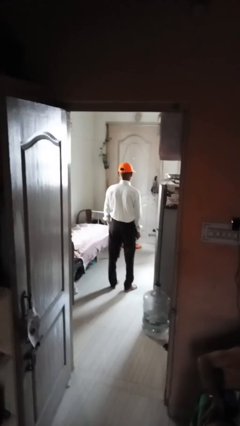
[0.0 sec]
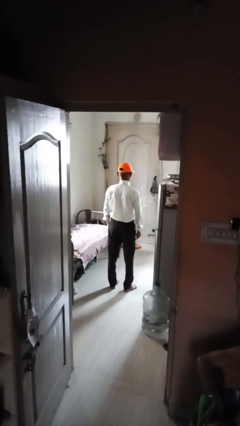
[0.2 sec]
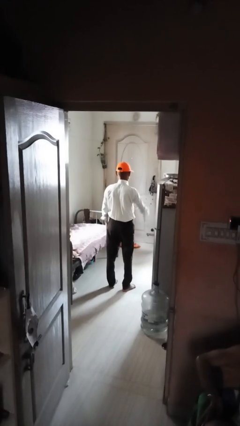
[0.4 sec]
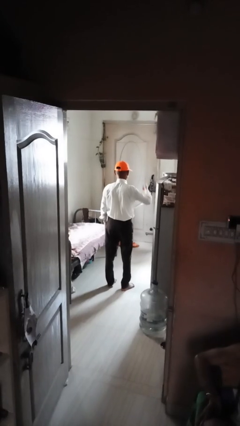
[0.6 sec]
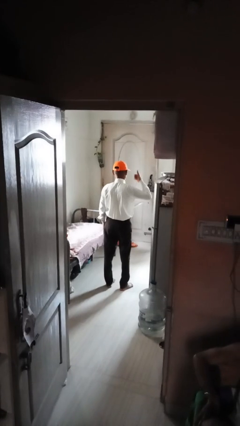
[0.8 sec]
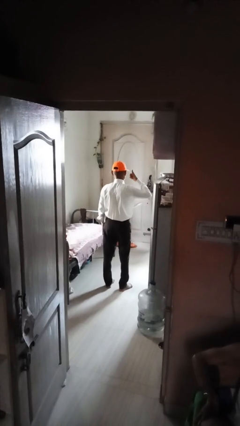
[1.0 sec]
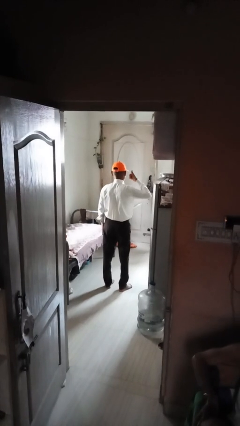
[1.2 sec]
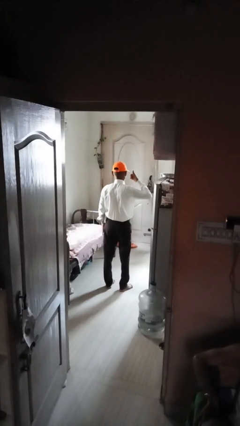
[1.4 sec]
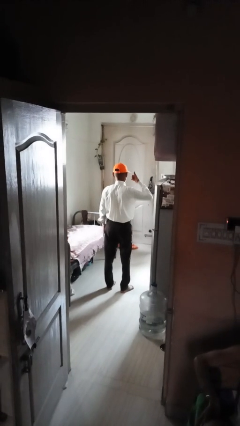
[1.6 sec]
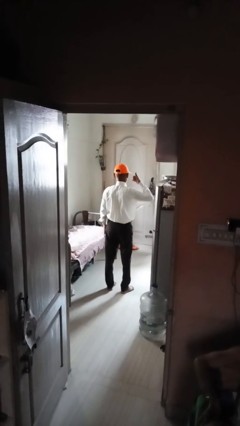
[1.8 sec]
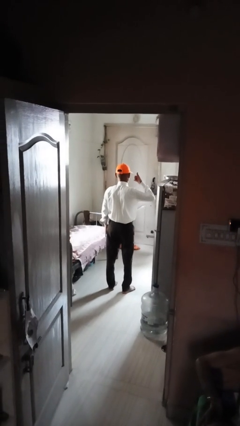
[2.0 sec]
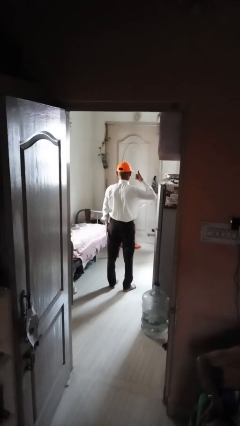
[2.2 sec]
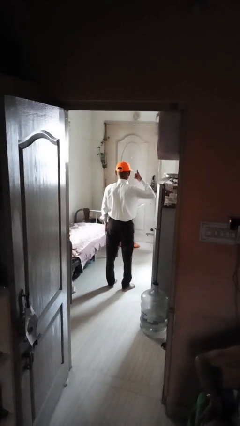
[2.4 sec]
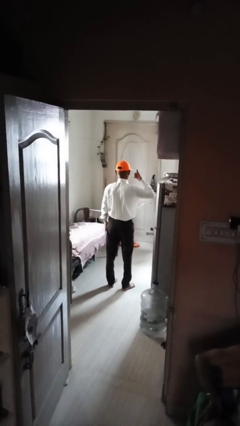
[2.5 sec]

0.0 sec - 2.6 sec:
person gestures call me

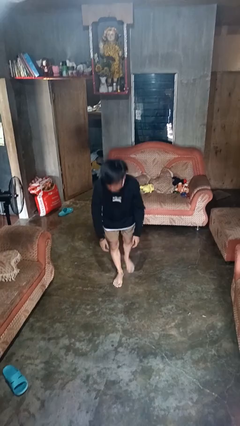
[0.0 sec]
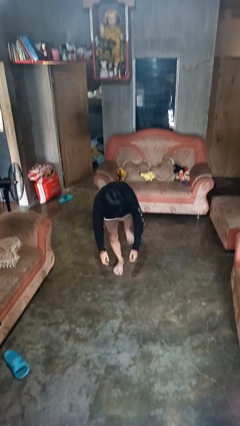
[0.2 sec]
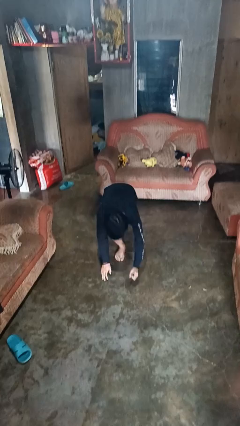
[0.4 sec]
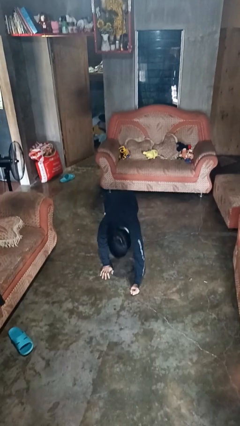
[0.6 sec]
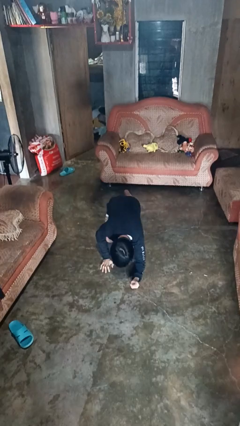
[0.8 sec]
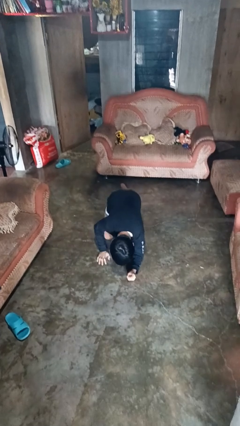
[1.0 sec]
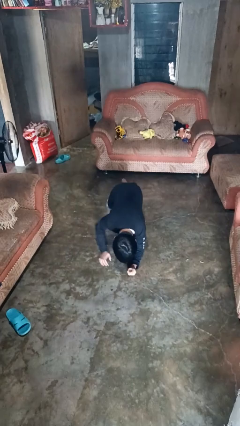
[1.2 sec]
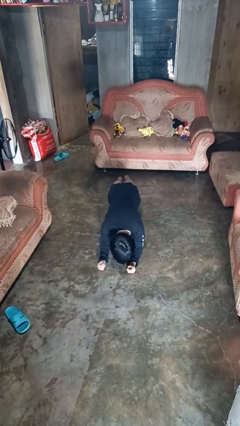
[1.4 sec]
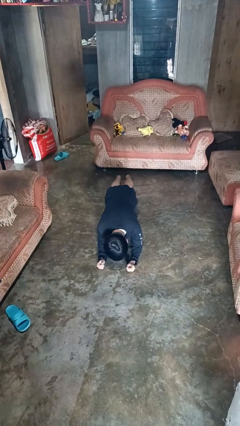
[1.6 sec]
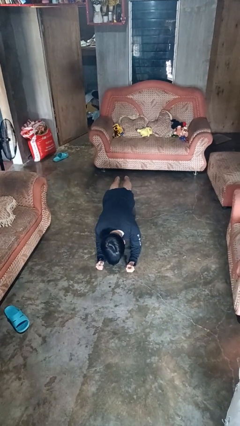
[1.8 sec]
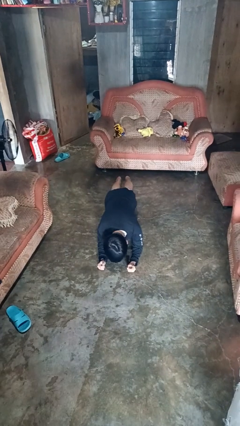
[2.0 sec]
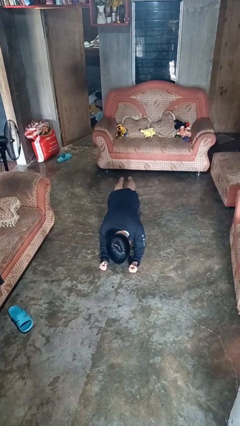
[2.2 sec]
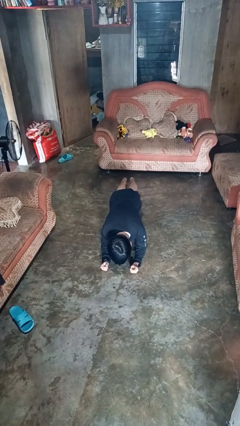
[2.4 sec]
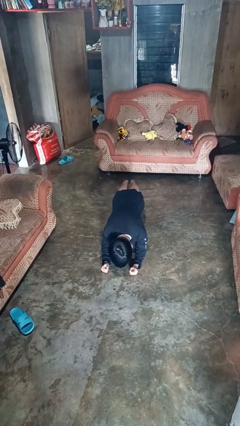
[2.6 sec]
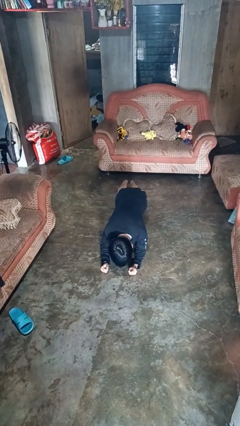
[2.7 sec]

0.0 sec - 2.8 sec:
person exercises with plank

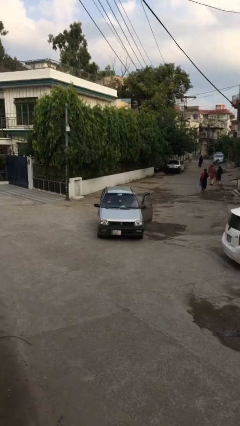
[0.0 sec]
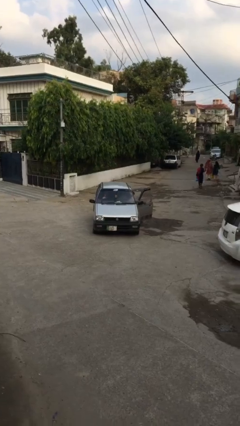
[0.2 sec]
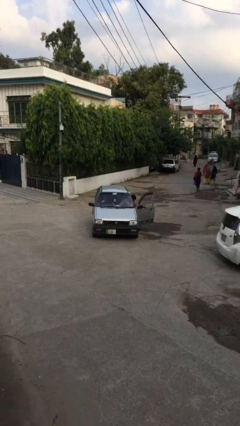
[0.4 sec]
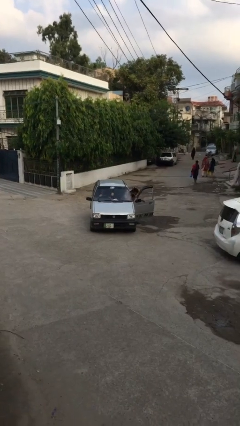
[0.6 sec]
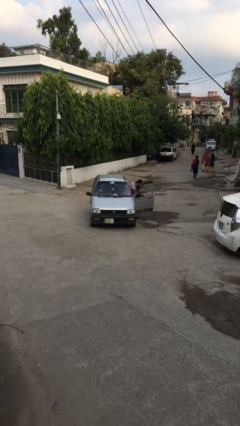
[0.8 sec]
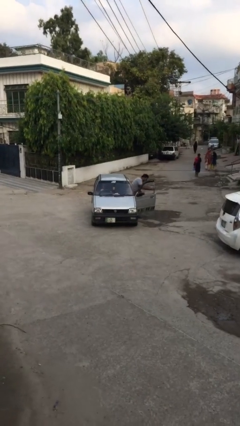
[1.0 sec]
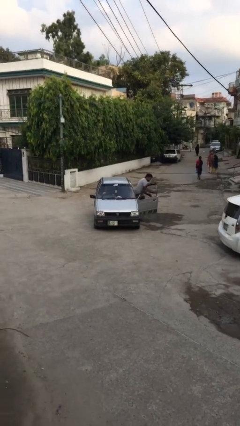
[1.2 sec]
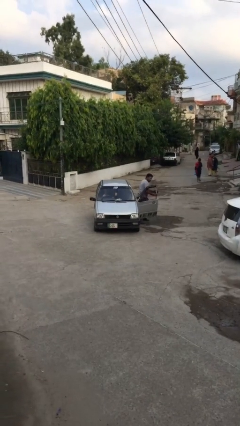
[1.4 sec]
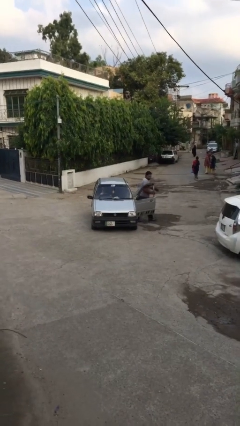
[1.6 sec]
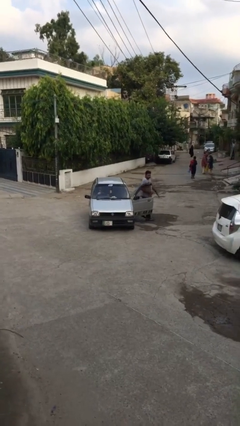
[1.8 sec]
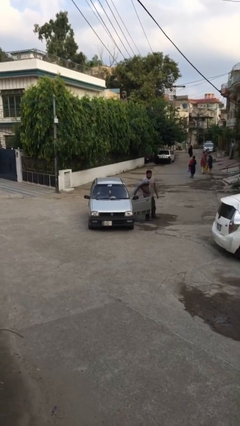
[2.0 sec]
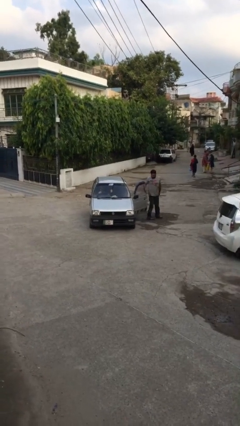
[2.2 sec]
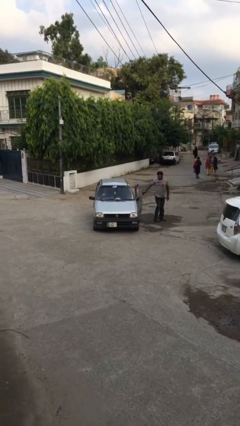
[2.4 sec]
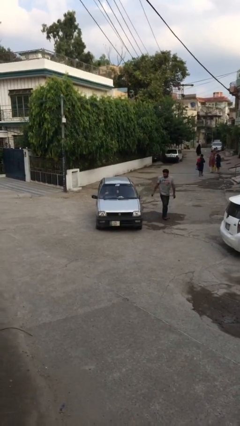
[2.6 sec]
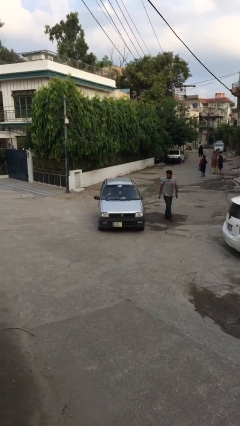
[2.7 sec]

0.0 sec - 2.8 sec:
car drops off person

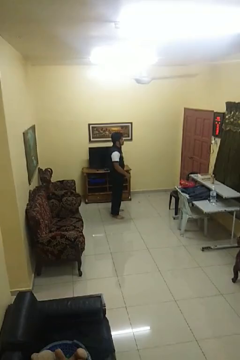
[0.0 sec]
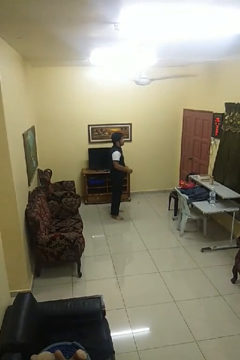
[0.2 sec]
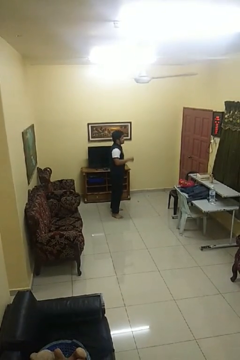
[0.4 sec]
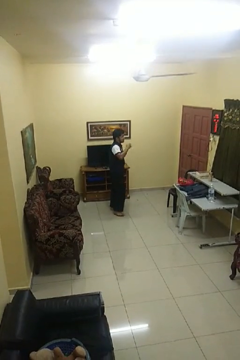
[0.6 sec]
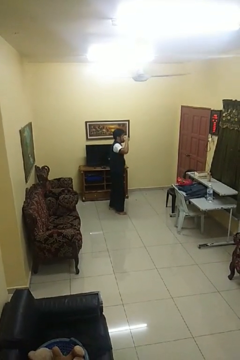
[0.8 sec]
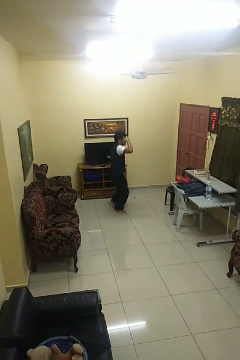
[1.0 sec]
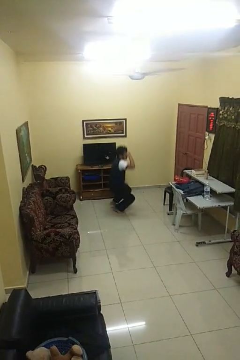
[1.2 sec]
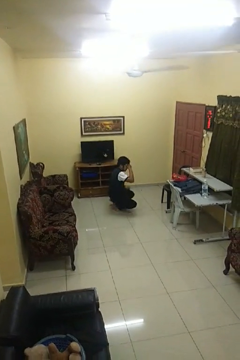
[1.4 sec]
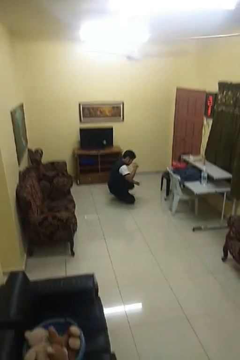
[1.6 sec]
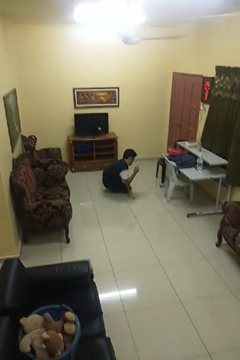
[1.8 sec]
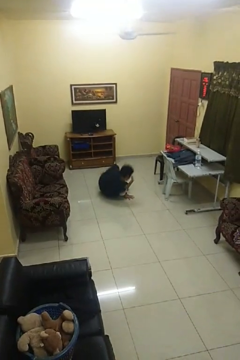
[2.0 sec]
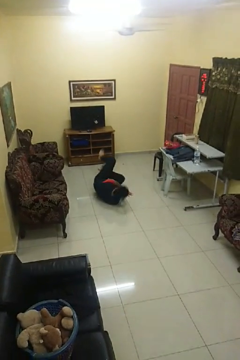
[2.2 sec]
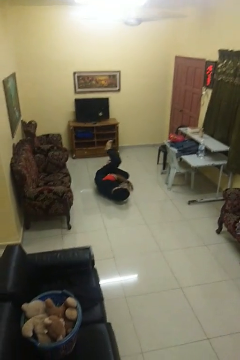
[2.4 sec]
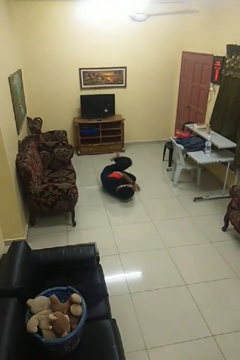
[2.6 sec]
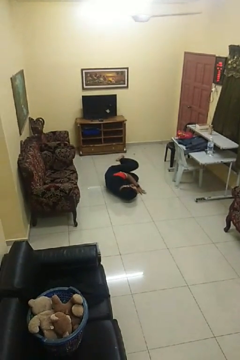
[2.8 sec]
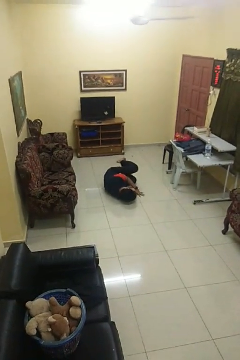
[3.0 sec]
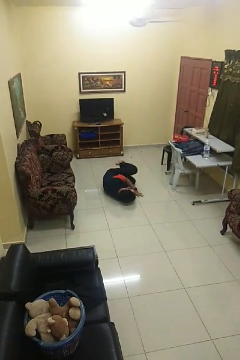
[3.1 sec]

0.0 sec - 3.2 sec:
person falls while standing

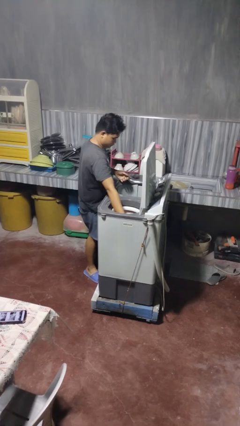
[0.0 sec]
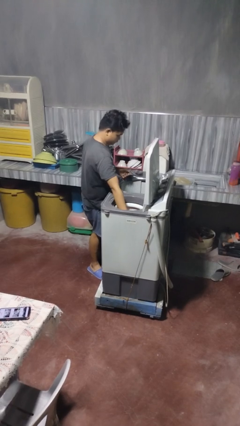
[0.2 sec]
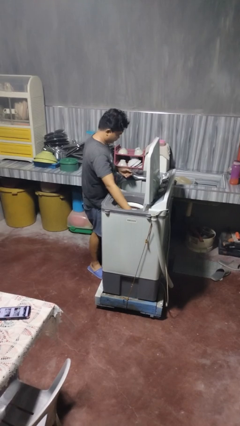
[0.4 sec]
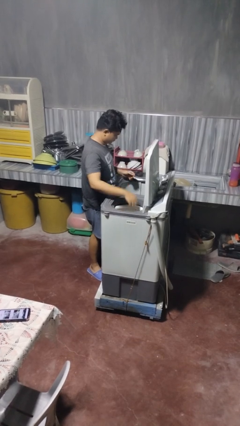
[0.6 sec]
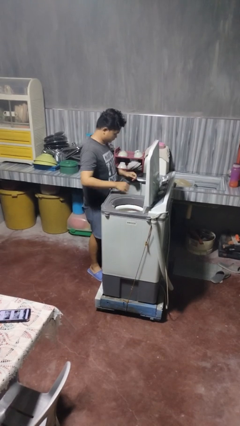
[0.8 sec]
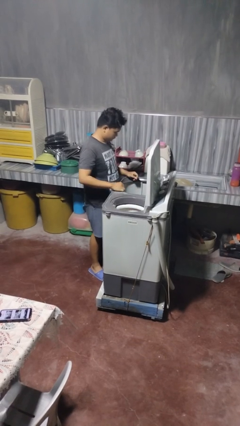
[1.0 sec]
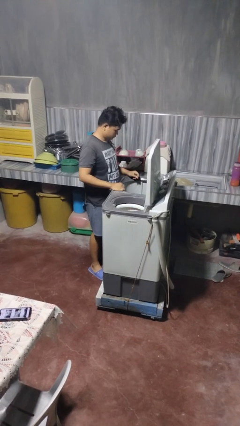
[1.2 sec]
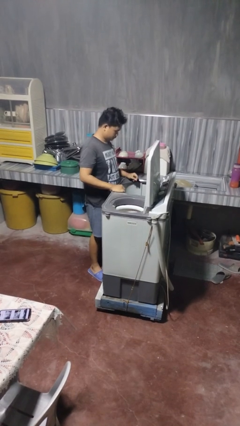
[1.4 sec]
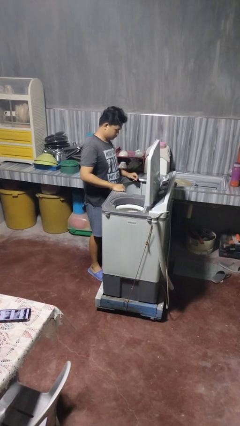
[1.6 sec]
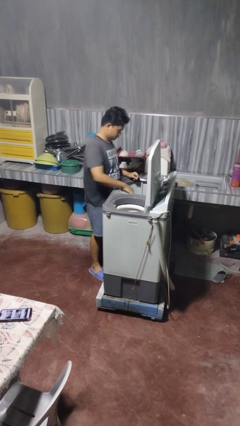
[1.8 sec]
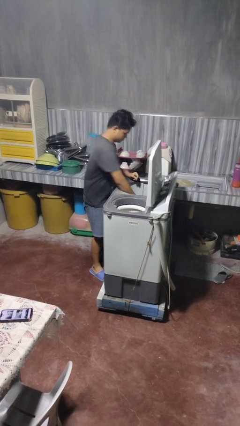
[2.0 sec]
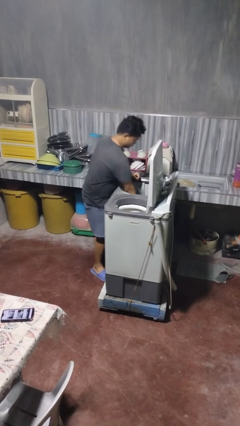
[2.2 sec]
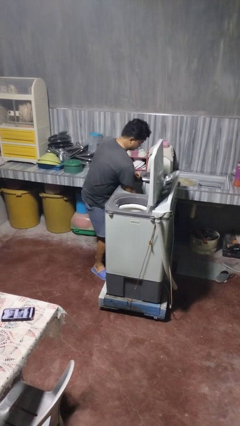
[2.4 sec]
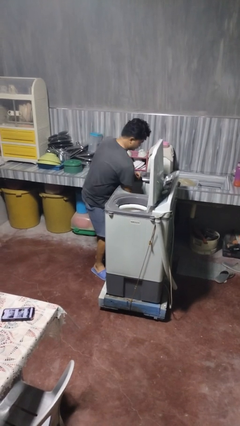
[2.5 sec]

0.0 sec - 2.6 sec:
person loads dryer

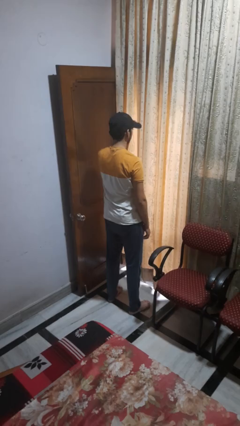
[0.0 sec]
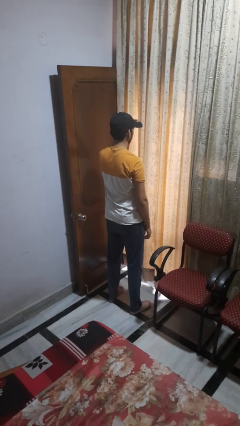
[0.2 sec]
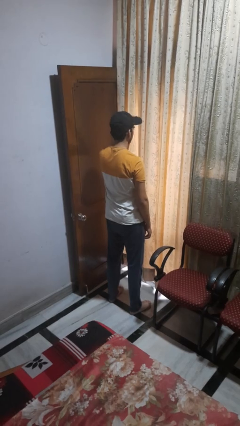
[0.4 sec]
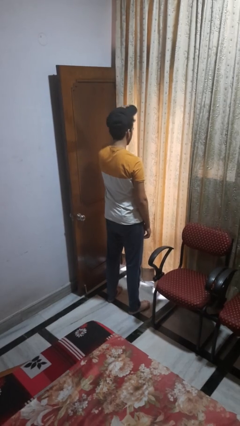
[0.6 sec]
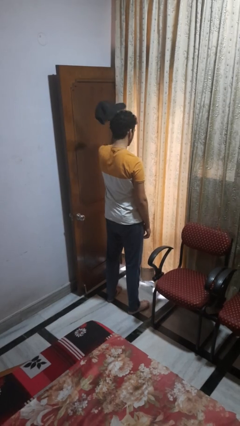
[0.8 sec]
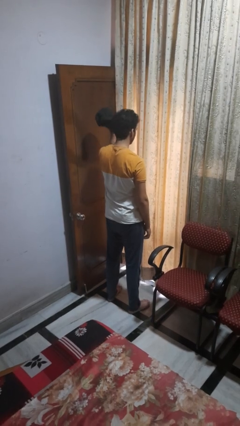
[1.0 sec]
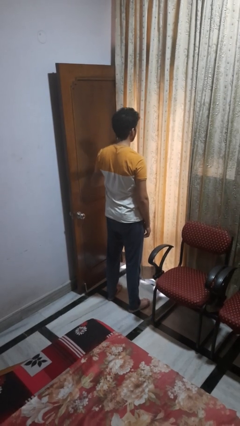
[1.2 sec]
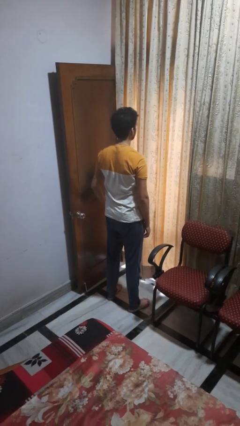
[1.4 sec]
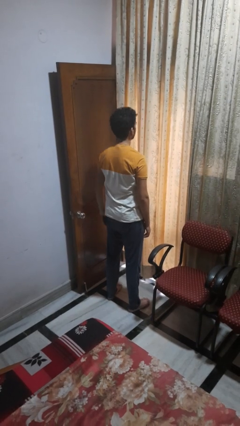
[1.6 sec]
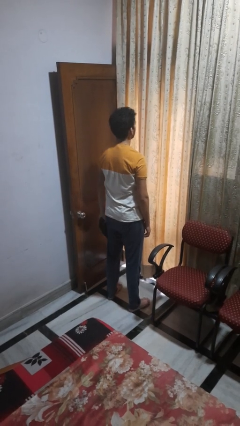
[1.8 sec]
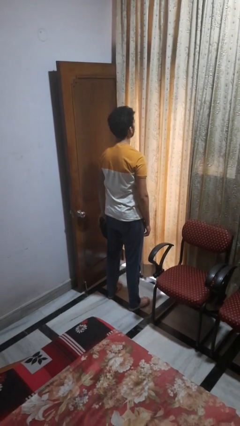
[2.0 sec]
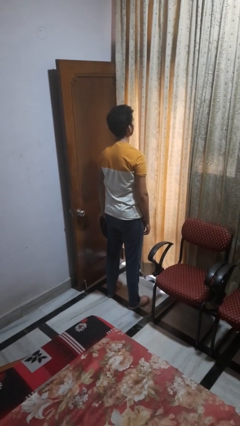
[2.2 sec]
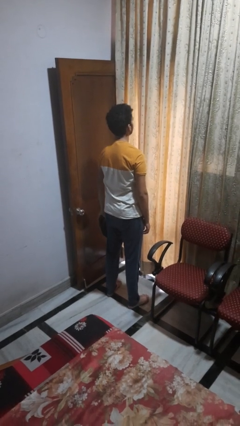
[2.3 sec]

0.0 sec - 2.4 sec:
person takes off hat

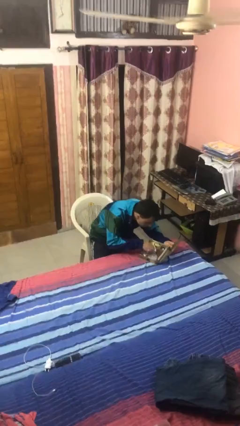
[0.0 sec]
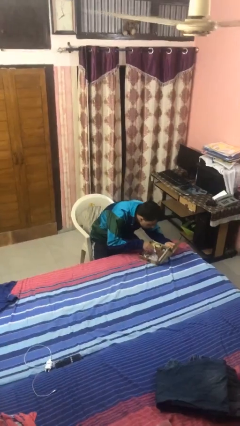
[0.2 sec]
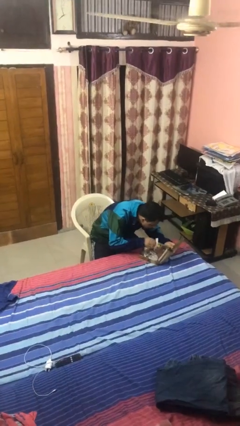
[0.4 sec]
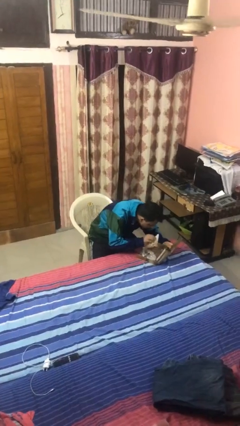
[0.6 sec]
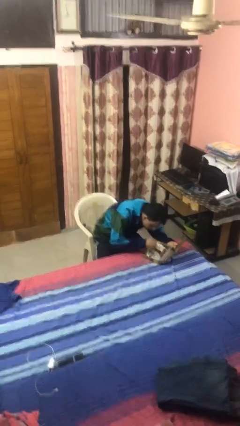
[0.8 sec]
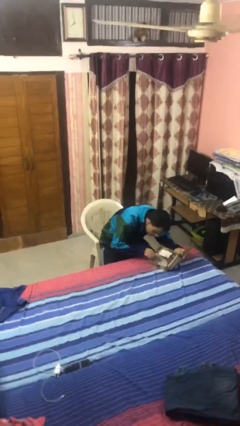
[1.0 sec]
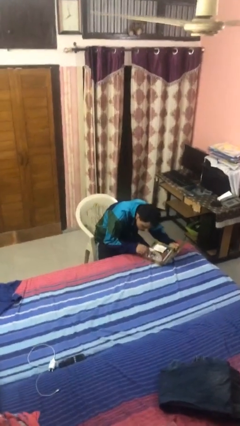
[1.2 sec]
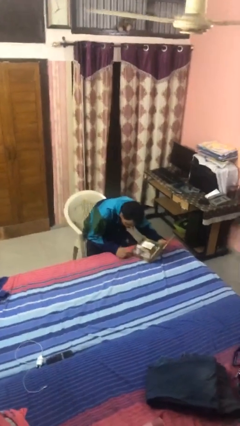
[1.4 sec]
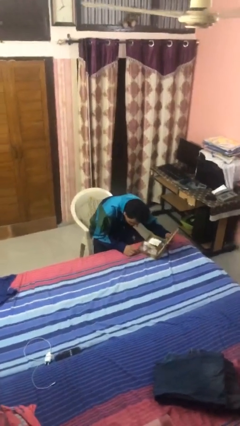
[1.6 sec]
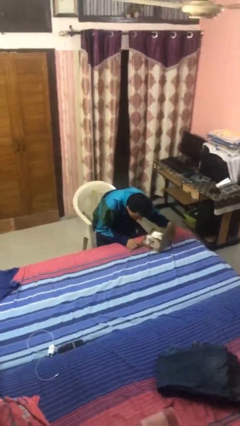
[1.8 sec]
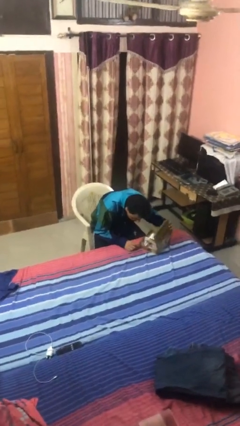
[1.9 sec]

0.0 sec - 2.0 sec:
person searches jewelry box
